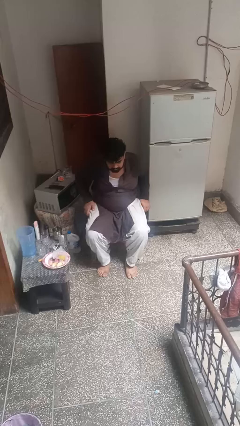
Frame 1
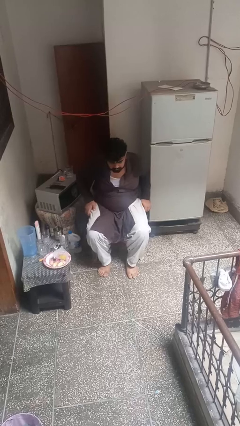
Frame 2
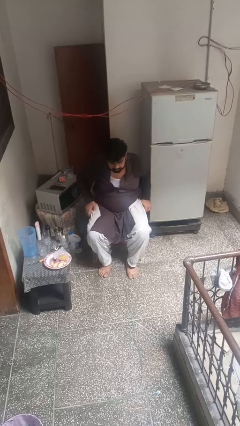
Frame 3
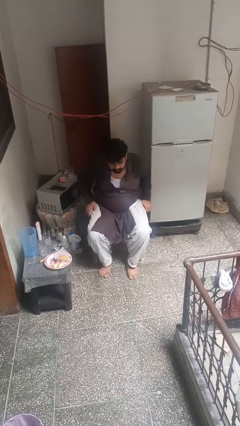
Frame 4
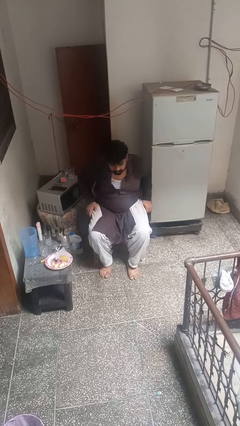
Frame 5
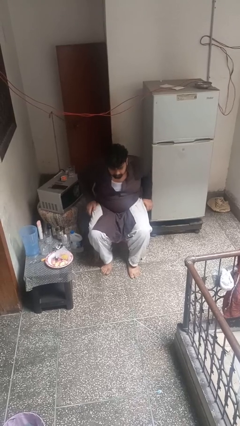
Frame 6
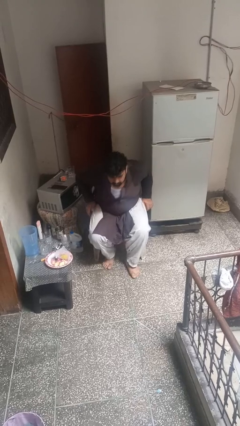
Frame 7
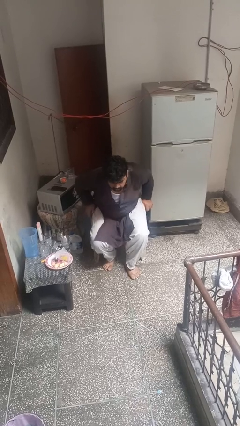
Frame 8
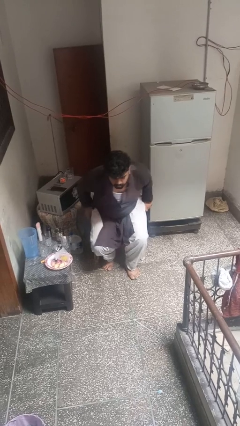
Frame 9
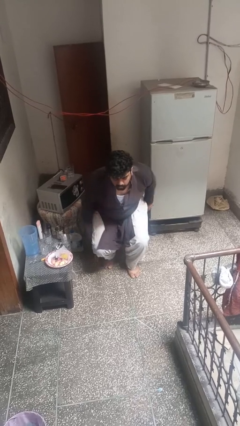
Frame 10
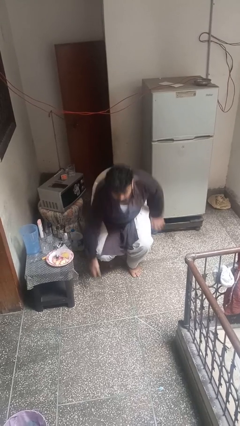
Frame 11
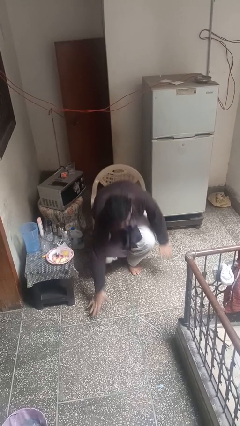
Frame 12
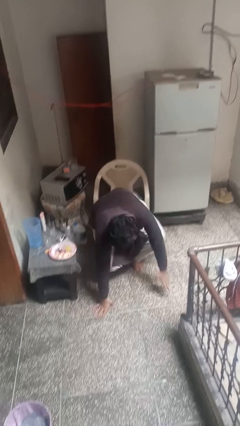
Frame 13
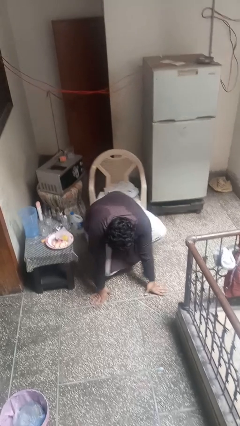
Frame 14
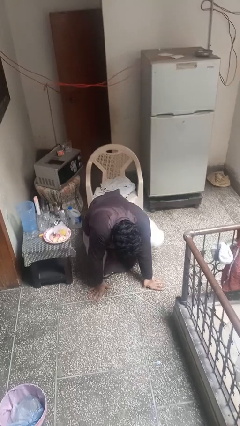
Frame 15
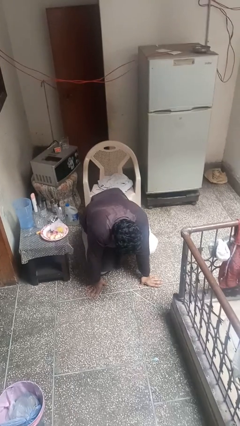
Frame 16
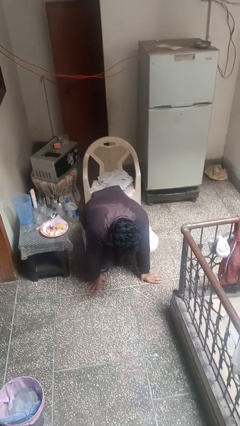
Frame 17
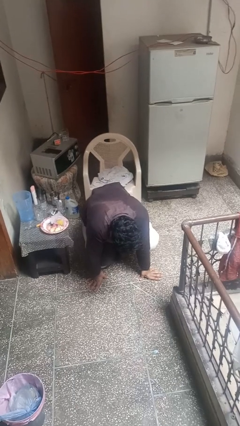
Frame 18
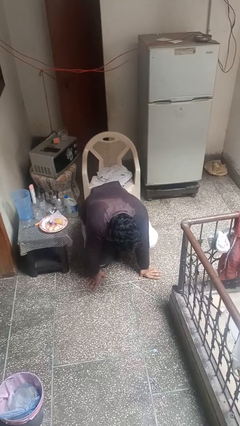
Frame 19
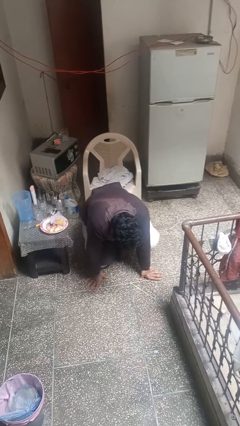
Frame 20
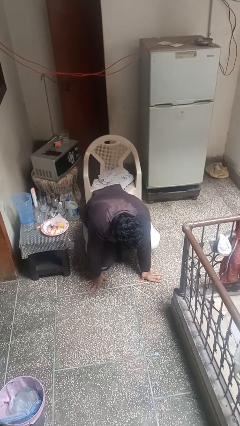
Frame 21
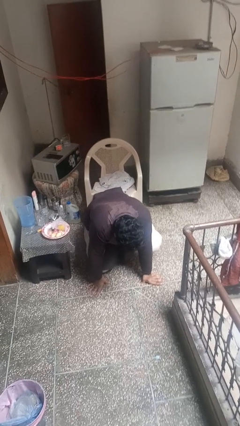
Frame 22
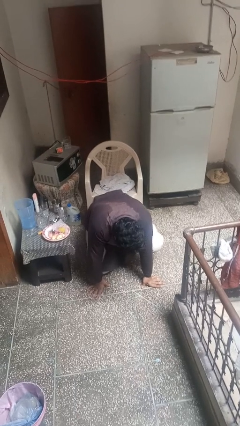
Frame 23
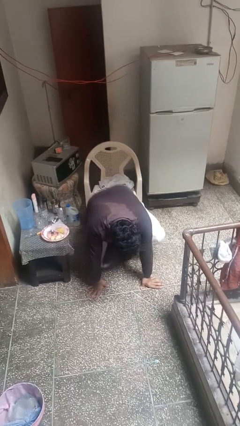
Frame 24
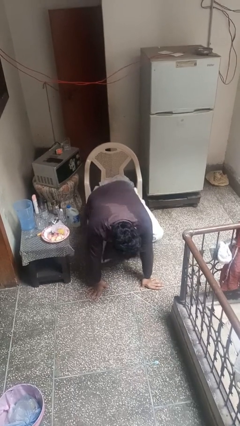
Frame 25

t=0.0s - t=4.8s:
person falls from chair

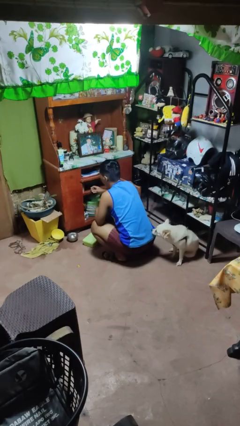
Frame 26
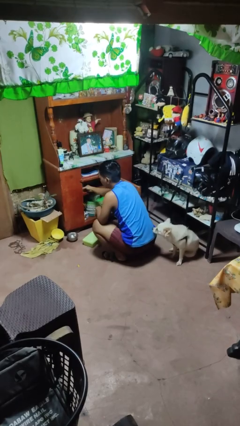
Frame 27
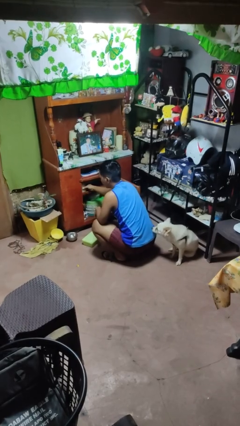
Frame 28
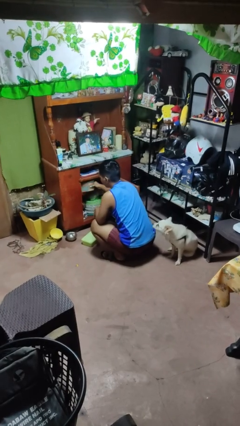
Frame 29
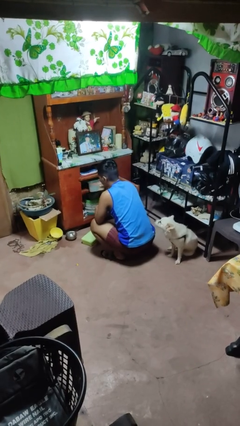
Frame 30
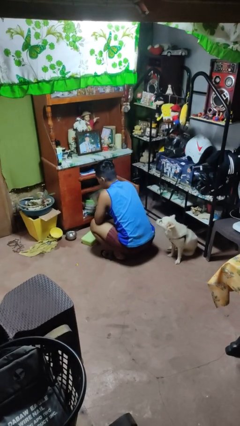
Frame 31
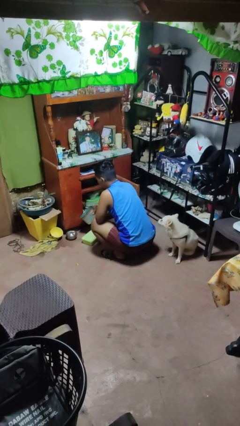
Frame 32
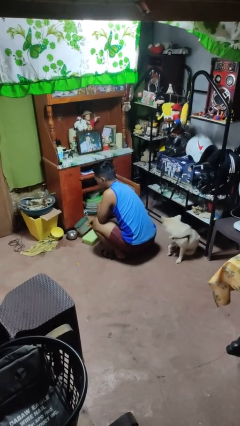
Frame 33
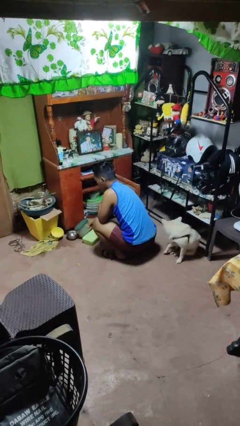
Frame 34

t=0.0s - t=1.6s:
person takes object from cabinet

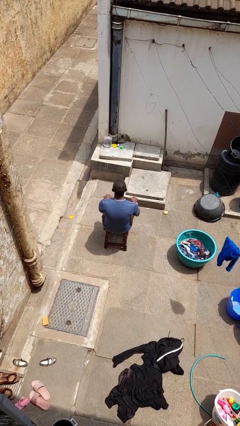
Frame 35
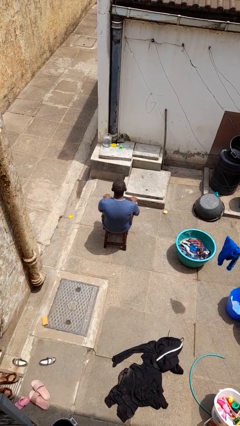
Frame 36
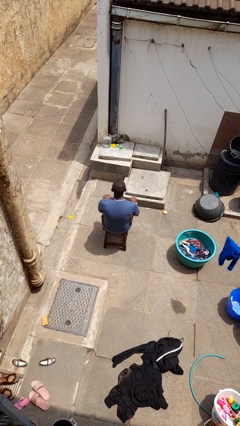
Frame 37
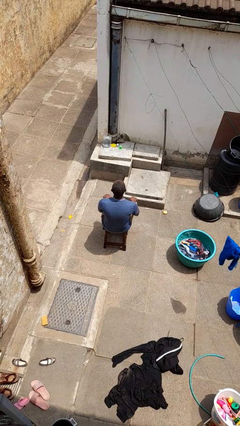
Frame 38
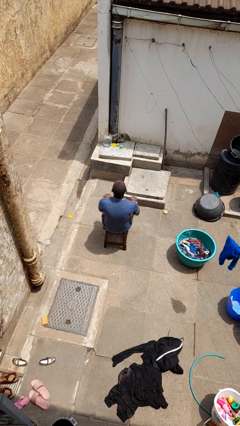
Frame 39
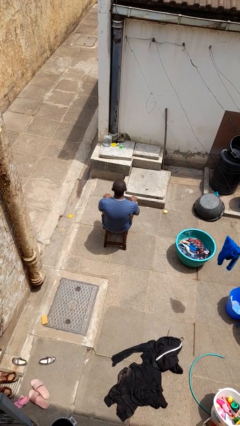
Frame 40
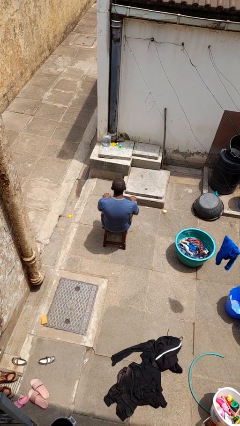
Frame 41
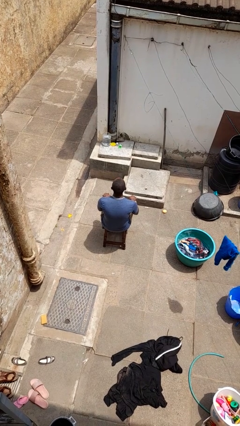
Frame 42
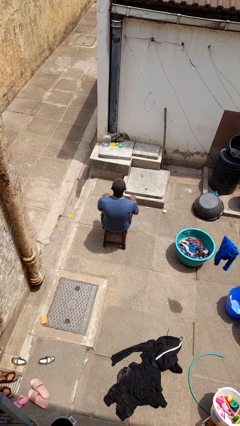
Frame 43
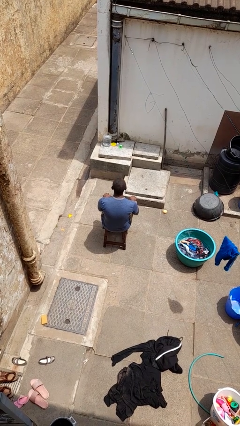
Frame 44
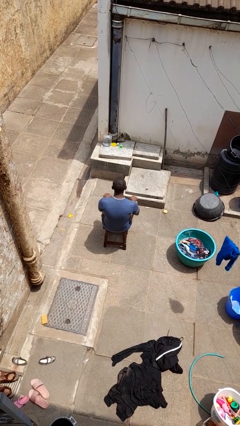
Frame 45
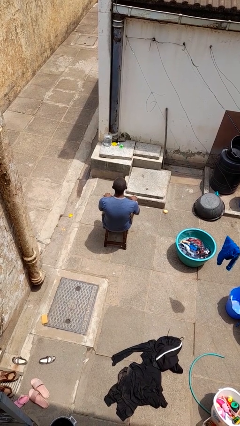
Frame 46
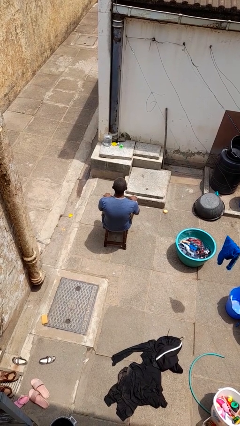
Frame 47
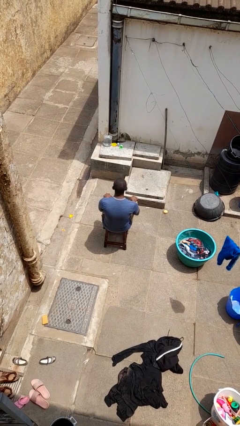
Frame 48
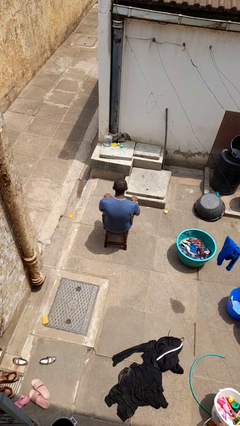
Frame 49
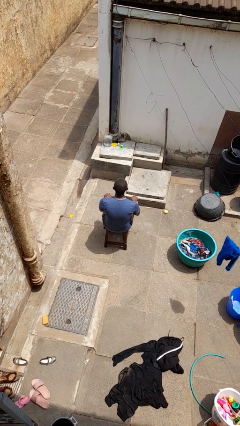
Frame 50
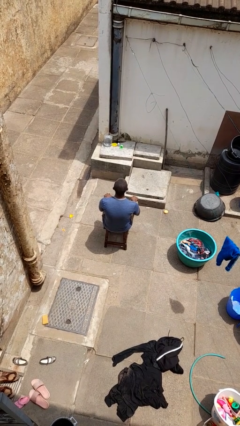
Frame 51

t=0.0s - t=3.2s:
person nods head

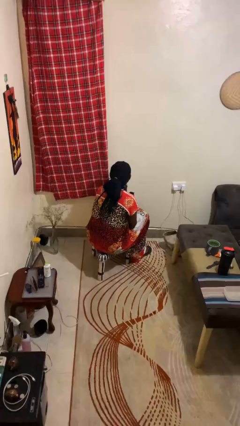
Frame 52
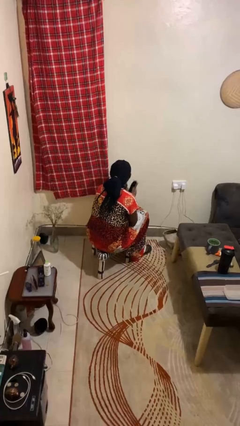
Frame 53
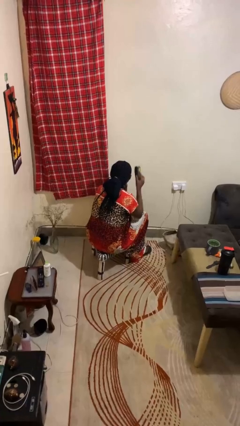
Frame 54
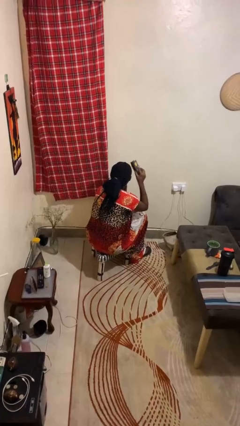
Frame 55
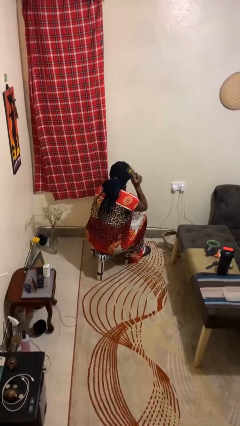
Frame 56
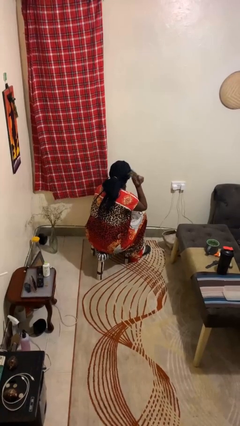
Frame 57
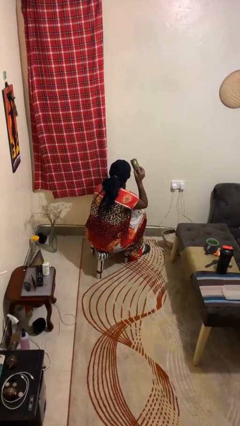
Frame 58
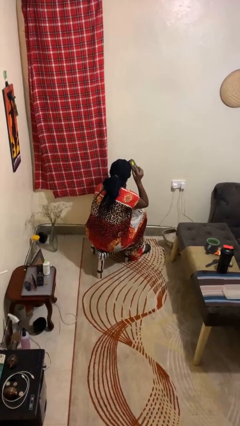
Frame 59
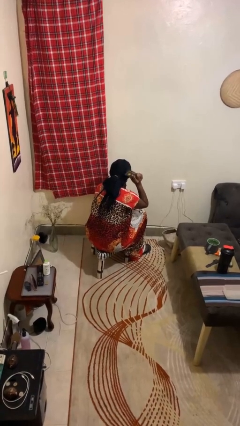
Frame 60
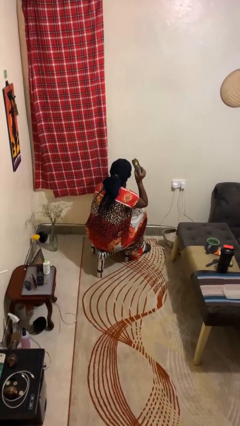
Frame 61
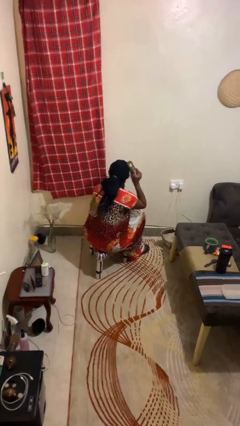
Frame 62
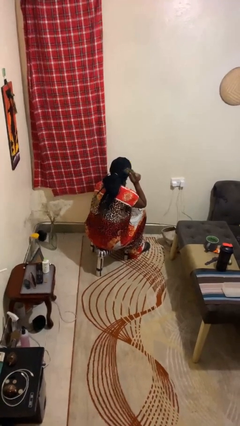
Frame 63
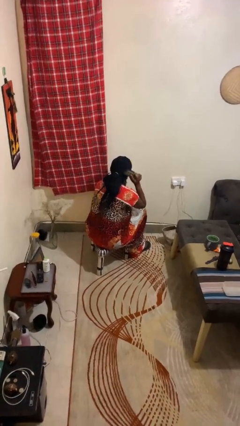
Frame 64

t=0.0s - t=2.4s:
person brushes hair

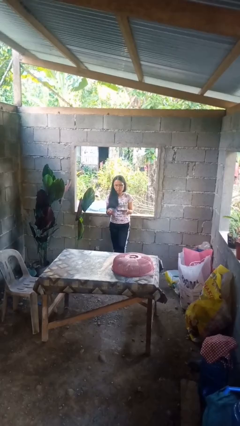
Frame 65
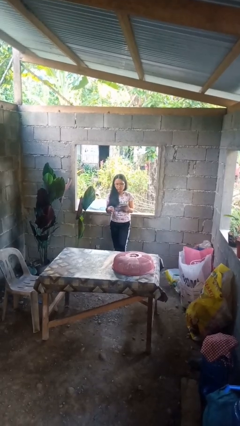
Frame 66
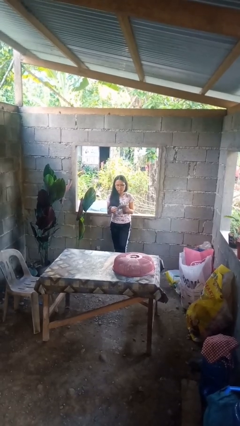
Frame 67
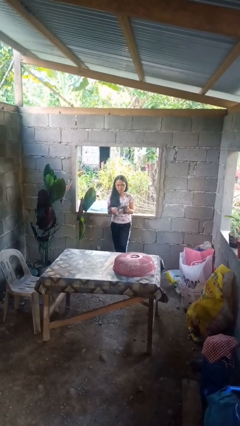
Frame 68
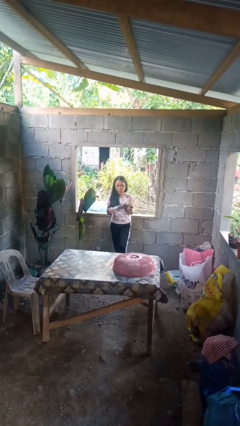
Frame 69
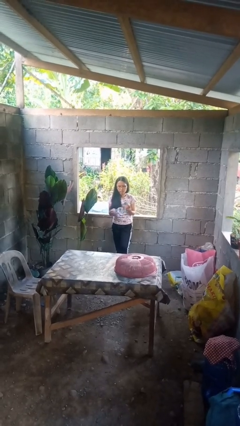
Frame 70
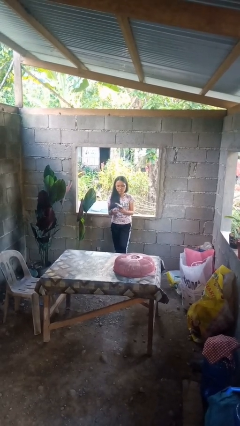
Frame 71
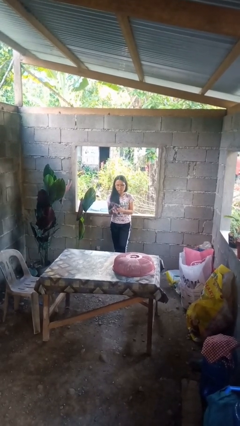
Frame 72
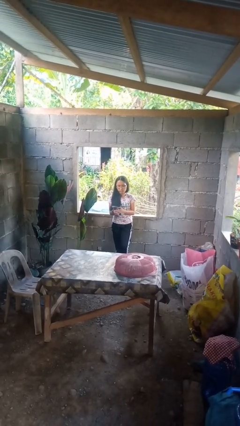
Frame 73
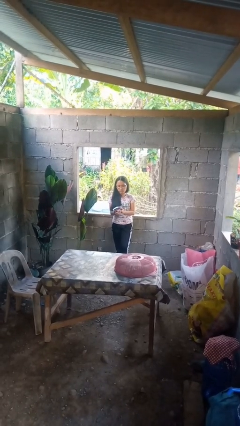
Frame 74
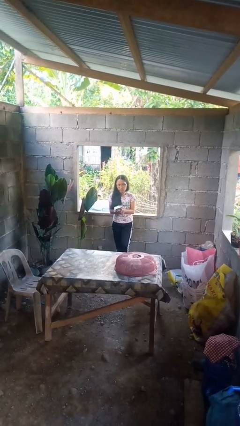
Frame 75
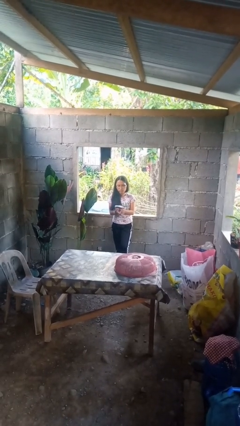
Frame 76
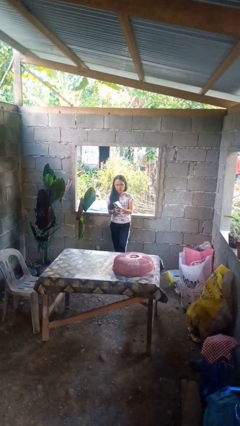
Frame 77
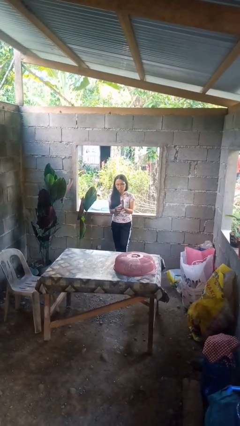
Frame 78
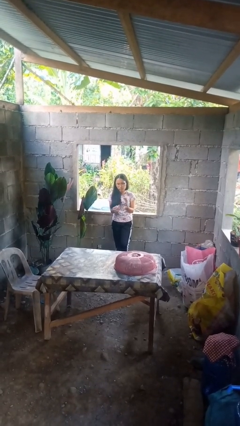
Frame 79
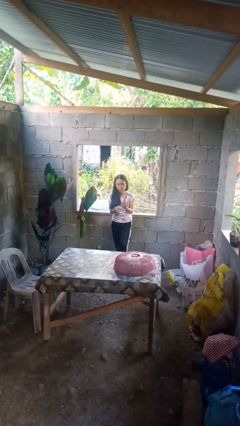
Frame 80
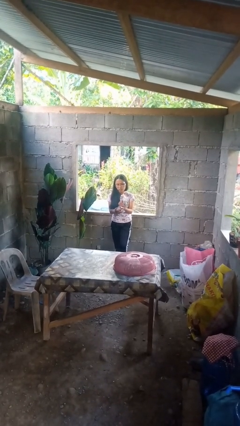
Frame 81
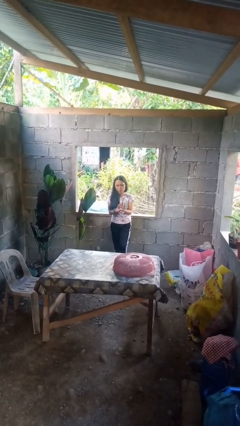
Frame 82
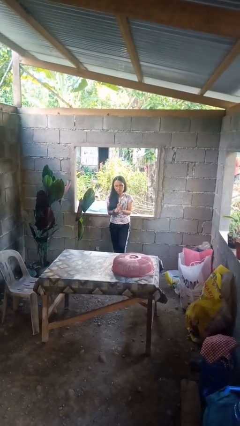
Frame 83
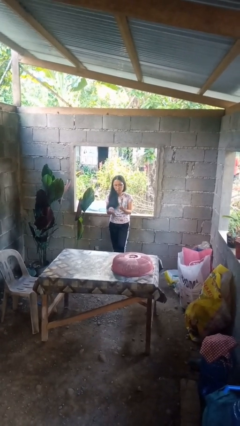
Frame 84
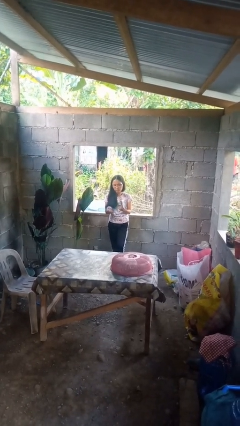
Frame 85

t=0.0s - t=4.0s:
person crumples paper

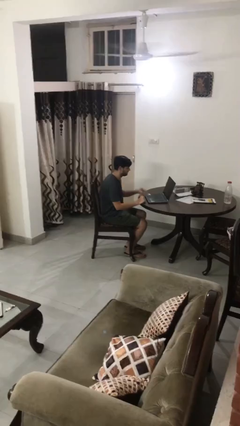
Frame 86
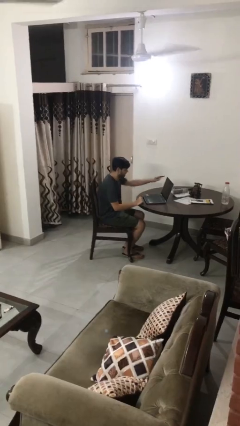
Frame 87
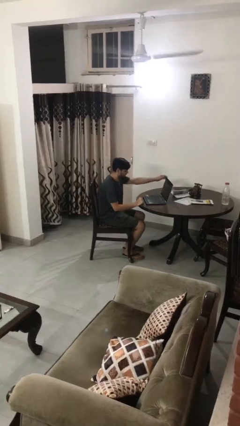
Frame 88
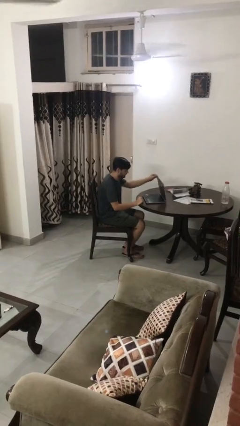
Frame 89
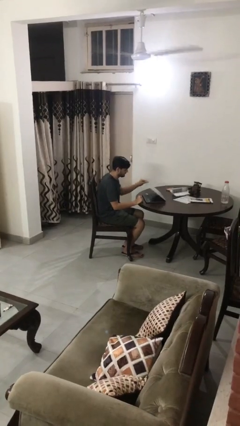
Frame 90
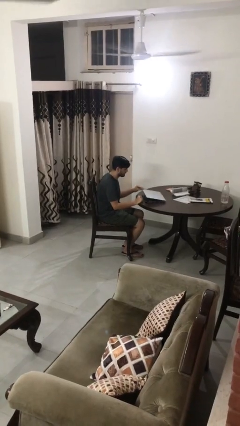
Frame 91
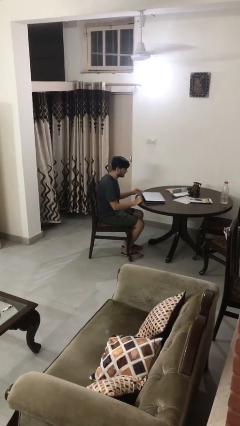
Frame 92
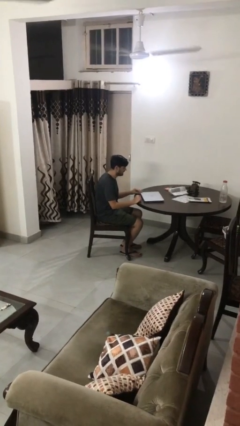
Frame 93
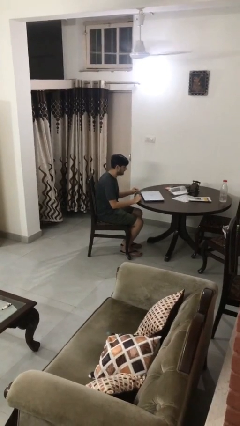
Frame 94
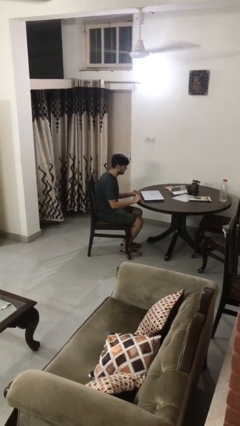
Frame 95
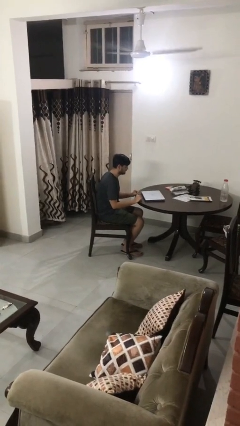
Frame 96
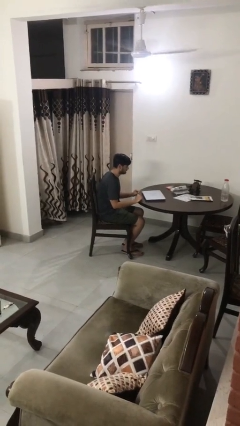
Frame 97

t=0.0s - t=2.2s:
person closes laptop
